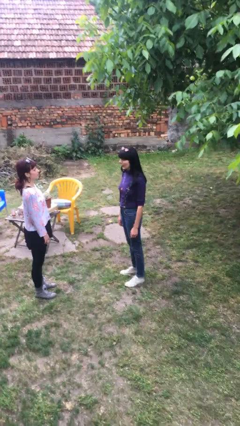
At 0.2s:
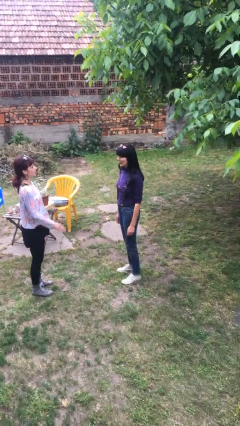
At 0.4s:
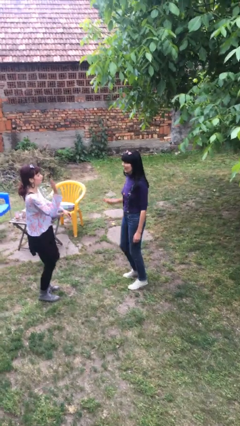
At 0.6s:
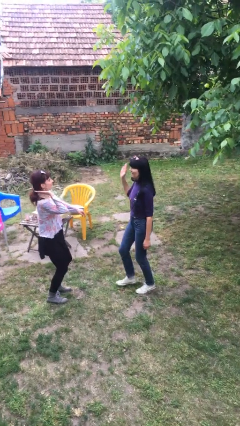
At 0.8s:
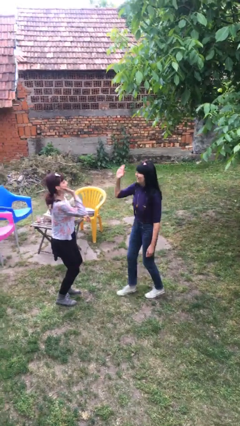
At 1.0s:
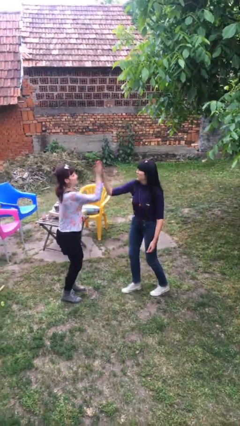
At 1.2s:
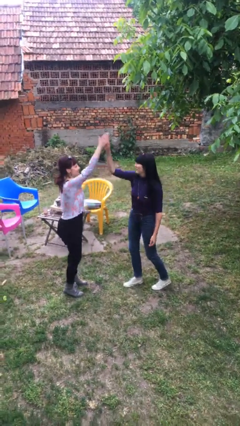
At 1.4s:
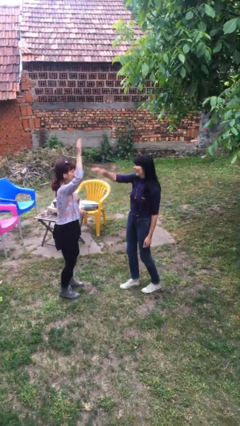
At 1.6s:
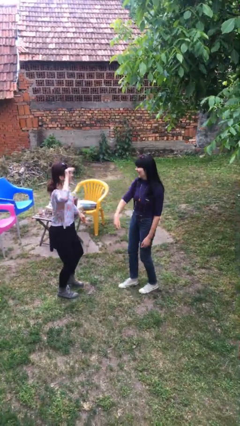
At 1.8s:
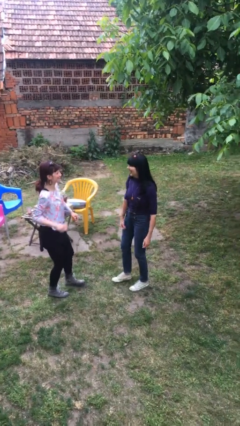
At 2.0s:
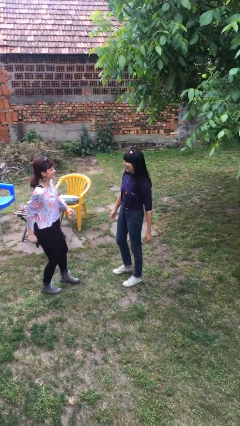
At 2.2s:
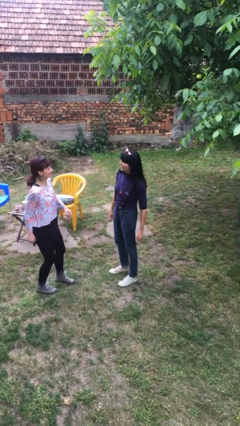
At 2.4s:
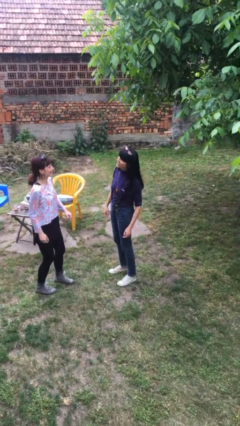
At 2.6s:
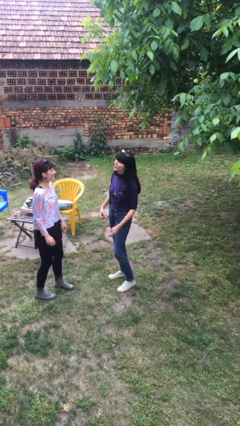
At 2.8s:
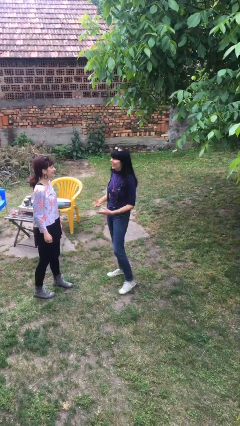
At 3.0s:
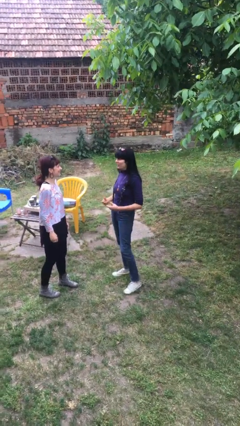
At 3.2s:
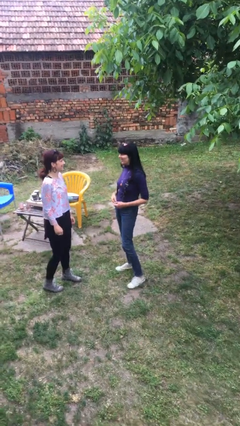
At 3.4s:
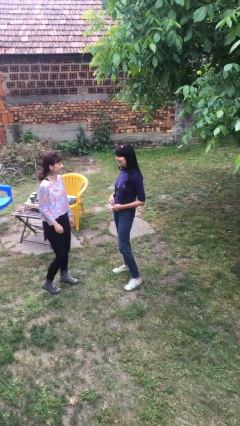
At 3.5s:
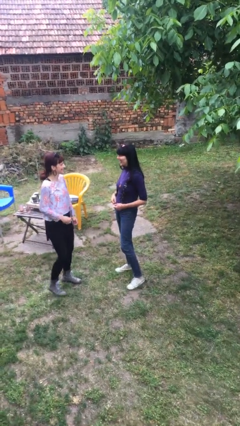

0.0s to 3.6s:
person highfives hand

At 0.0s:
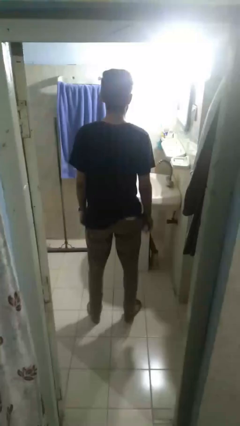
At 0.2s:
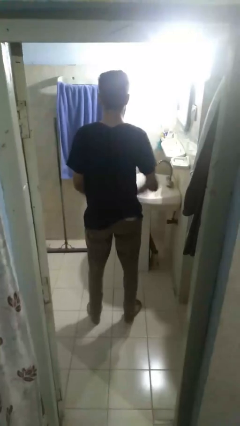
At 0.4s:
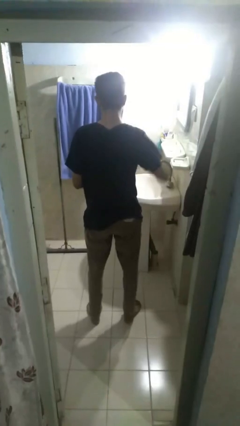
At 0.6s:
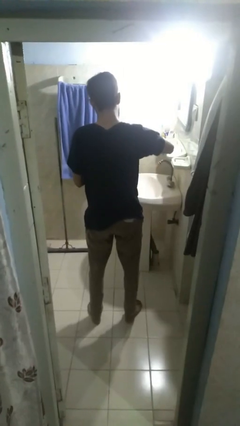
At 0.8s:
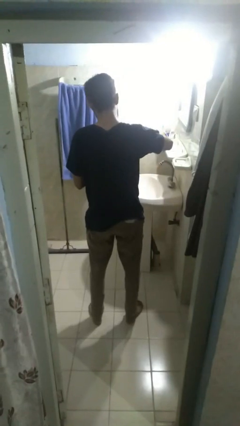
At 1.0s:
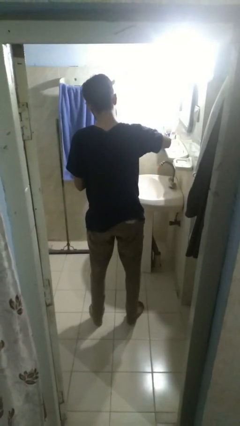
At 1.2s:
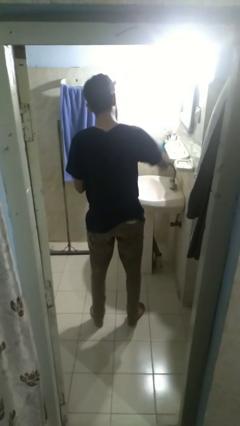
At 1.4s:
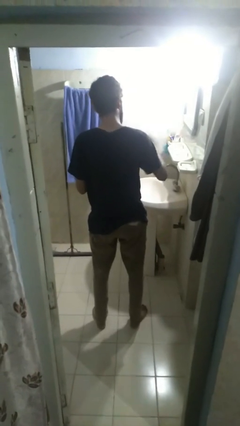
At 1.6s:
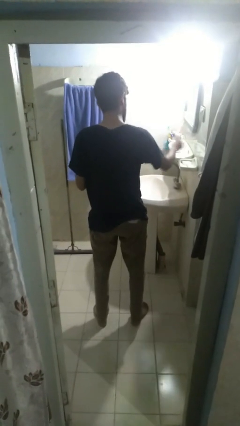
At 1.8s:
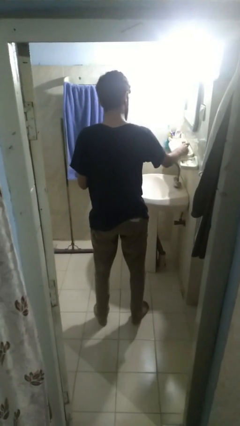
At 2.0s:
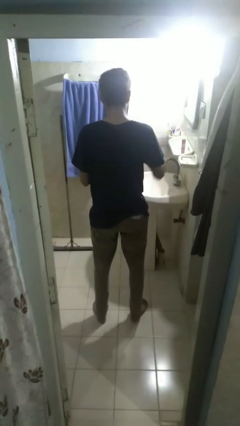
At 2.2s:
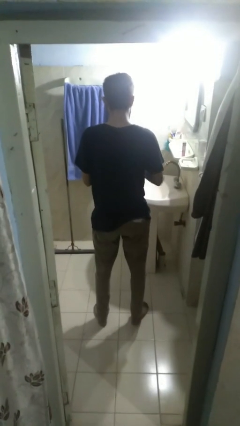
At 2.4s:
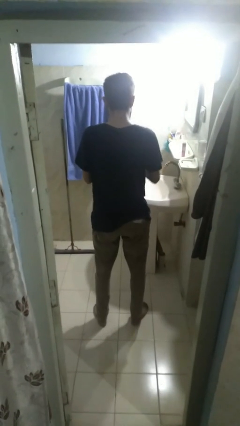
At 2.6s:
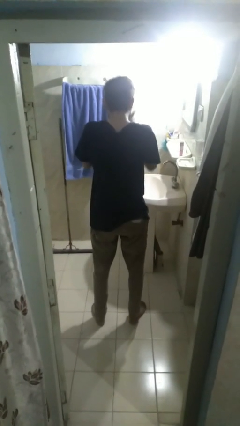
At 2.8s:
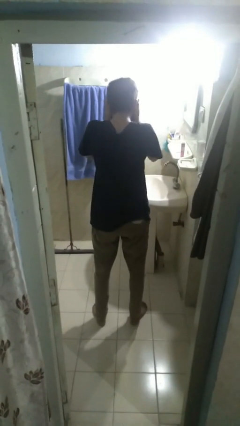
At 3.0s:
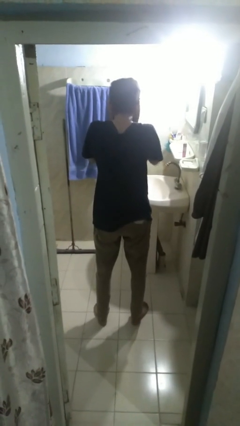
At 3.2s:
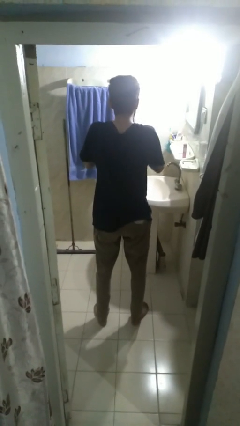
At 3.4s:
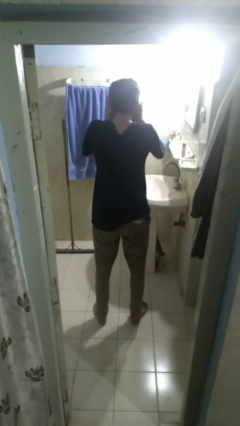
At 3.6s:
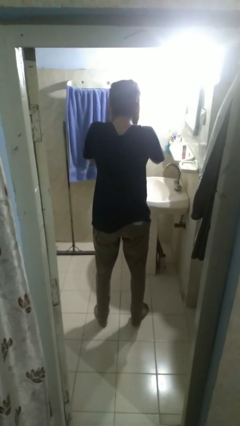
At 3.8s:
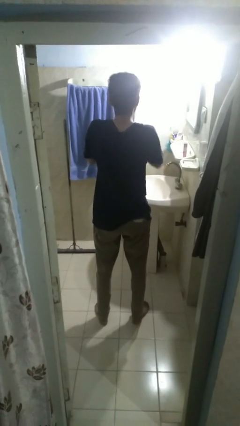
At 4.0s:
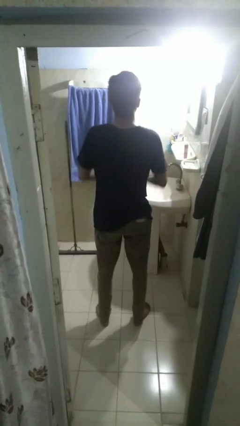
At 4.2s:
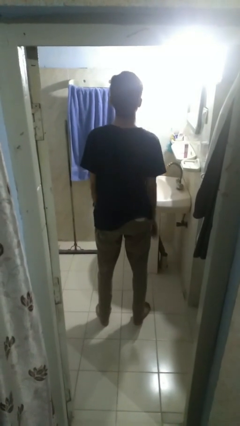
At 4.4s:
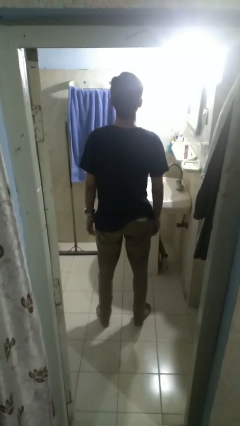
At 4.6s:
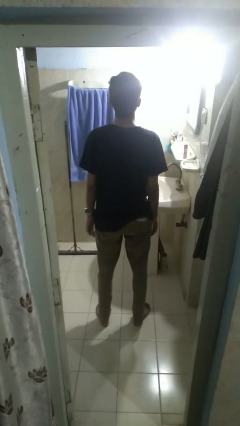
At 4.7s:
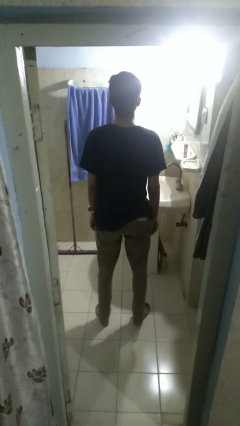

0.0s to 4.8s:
person applies facial moisturizer

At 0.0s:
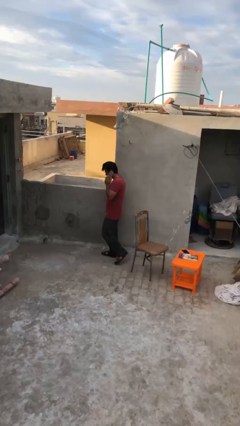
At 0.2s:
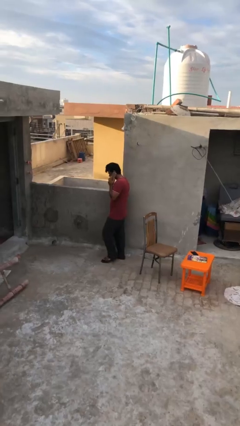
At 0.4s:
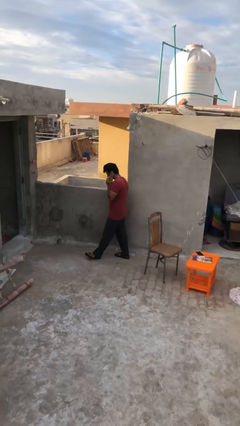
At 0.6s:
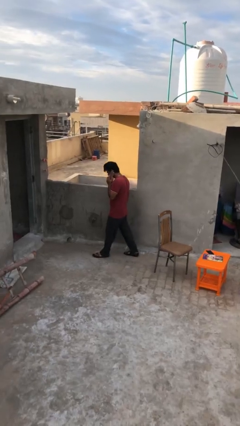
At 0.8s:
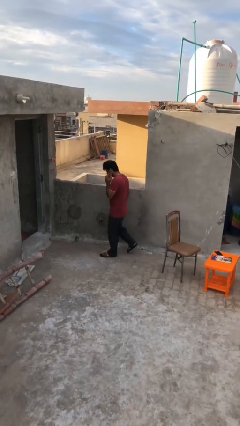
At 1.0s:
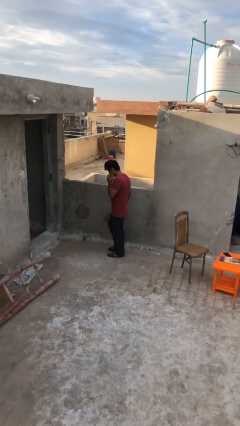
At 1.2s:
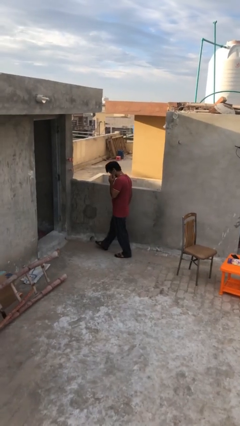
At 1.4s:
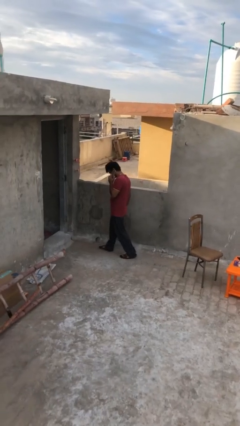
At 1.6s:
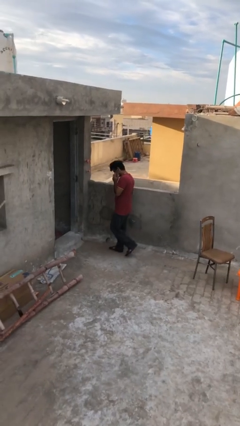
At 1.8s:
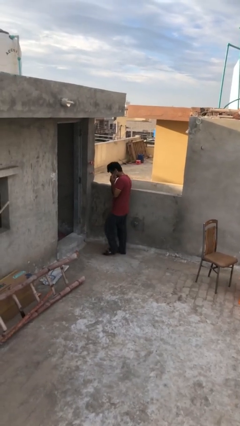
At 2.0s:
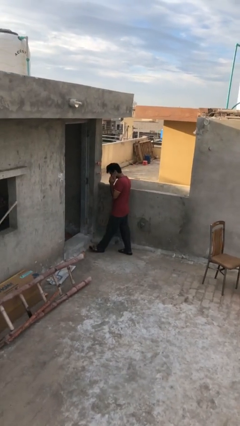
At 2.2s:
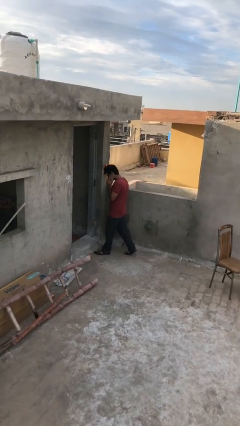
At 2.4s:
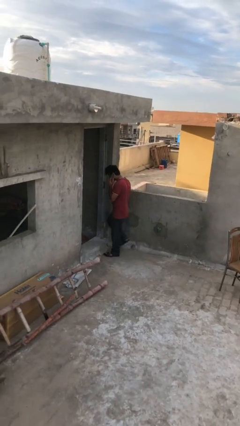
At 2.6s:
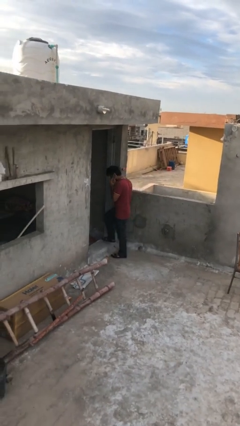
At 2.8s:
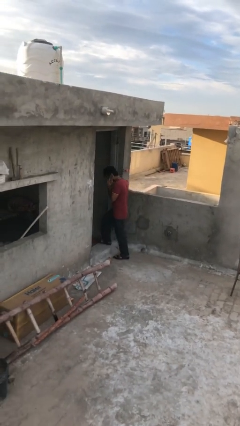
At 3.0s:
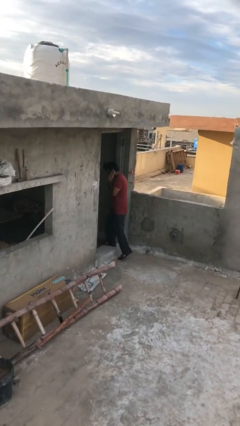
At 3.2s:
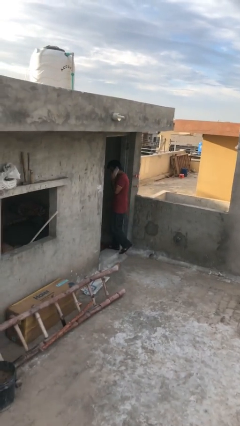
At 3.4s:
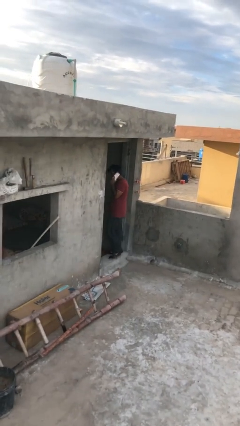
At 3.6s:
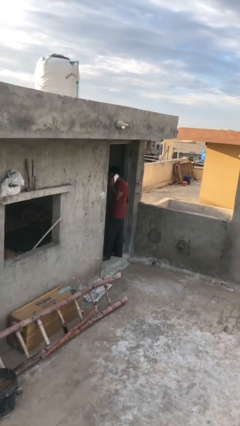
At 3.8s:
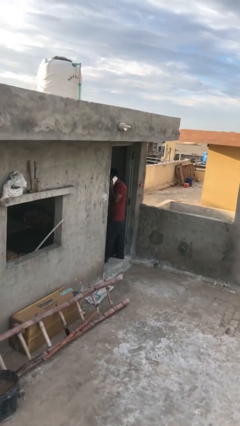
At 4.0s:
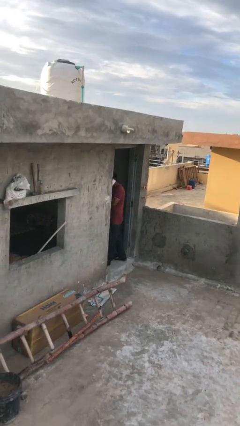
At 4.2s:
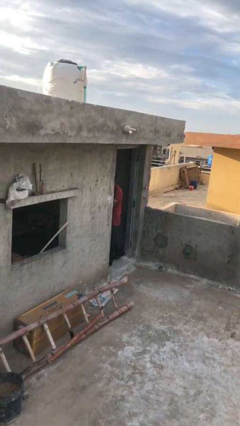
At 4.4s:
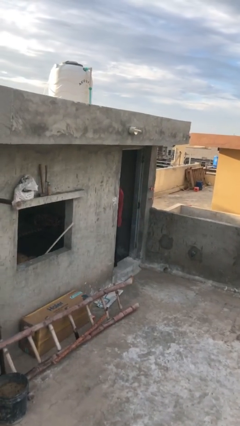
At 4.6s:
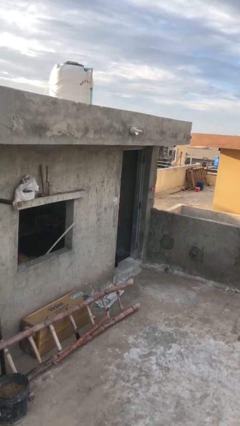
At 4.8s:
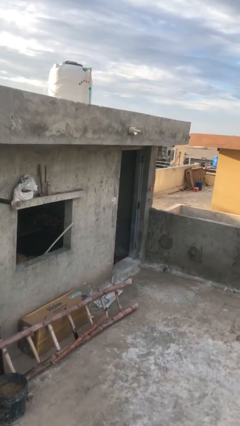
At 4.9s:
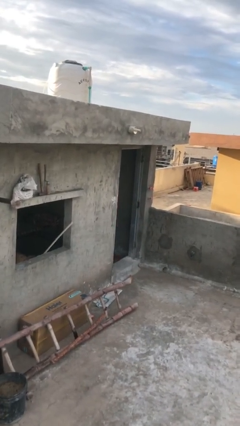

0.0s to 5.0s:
person exits scene through structure

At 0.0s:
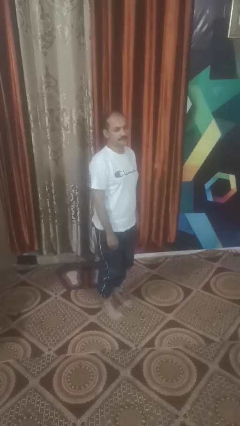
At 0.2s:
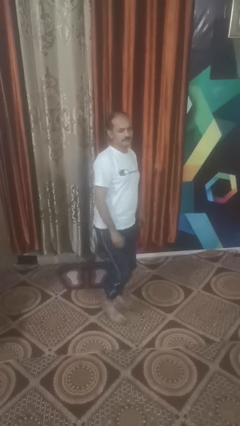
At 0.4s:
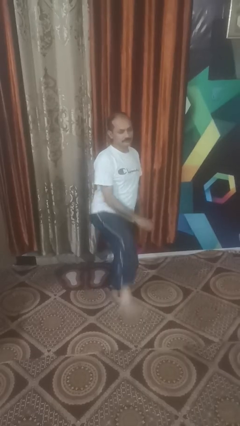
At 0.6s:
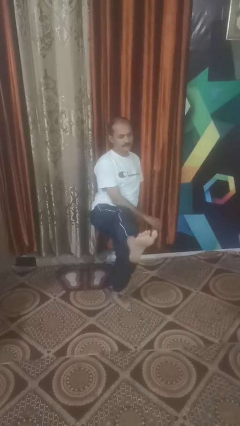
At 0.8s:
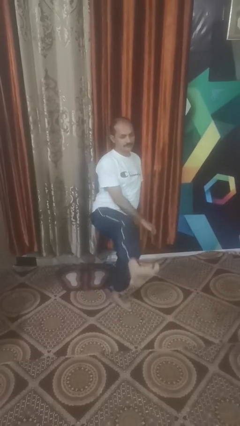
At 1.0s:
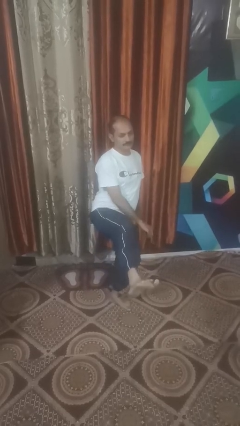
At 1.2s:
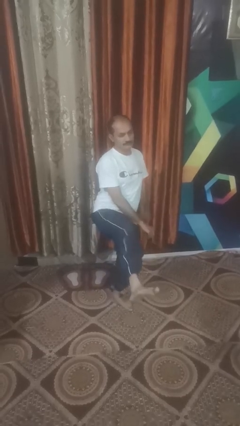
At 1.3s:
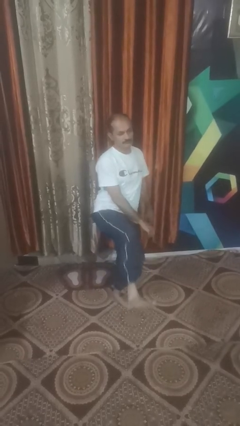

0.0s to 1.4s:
person karate kicks

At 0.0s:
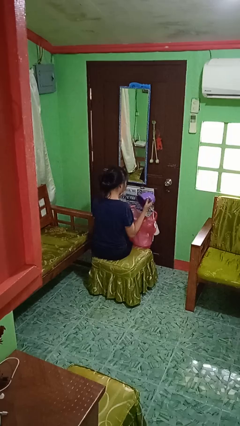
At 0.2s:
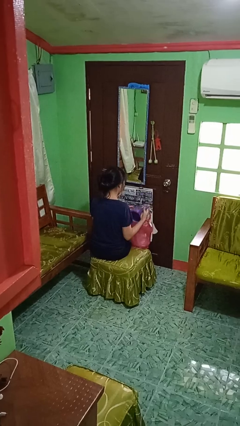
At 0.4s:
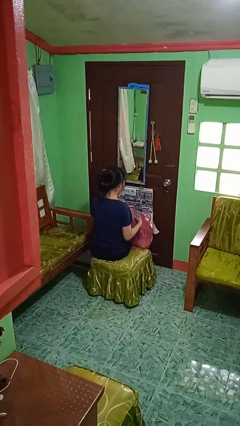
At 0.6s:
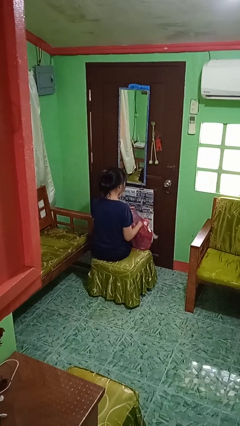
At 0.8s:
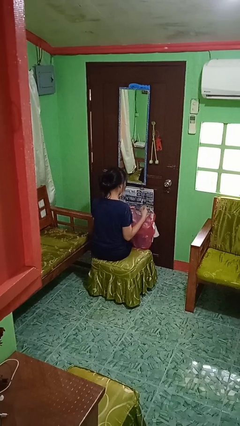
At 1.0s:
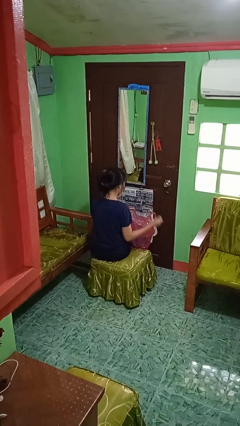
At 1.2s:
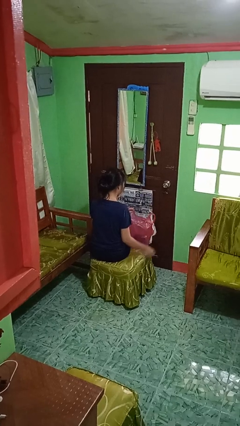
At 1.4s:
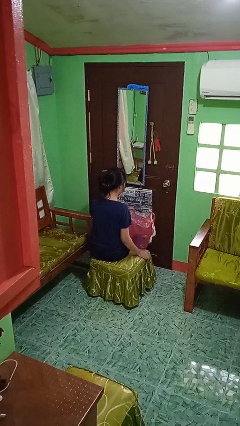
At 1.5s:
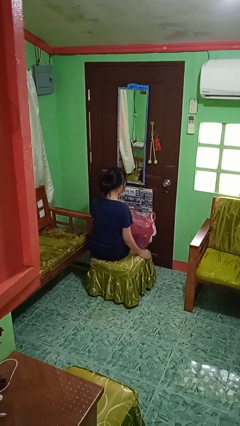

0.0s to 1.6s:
person puts object into bag

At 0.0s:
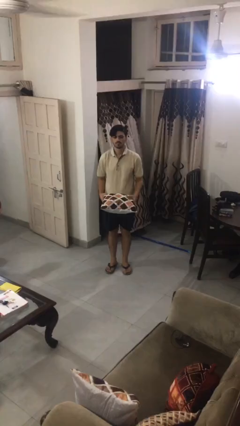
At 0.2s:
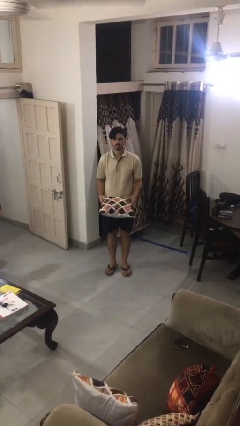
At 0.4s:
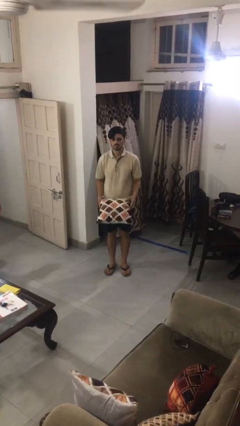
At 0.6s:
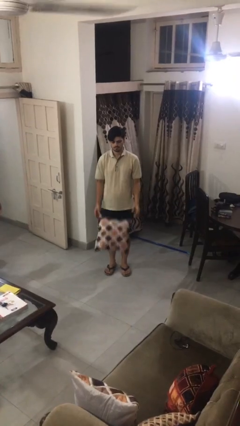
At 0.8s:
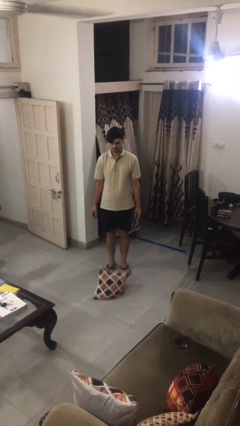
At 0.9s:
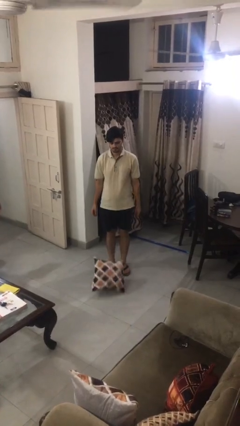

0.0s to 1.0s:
person drops object
